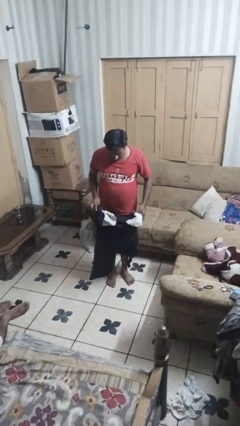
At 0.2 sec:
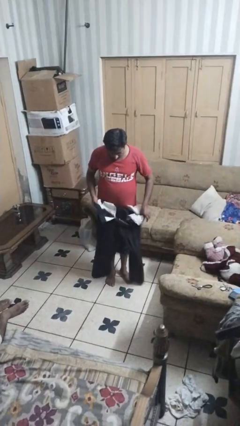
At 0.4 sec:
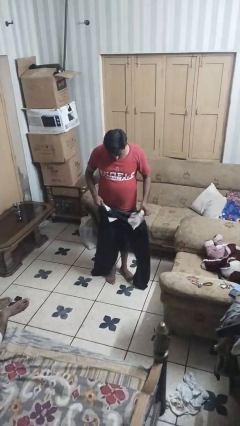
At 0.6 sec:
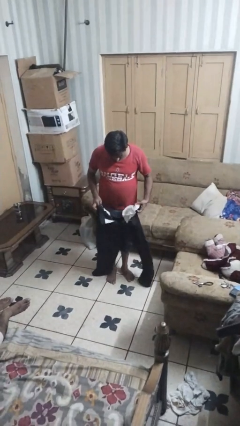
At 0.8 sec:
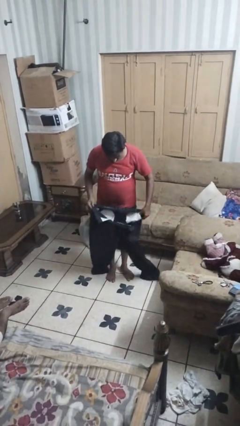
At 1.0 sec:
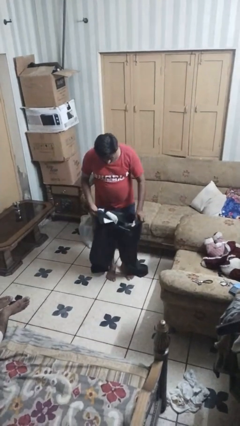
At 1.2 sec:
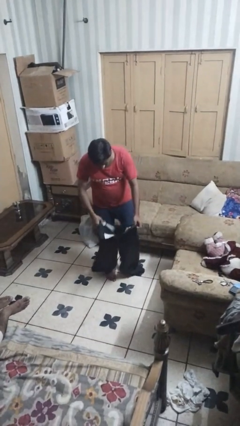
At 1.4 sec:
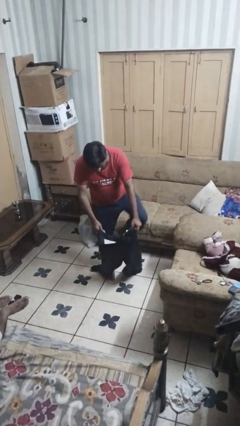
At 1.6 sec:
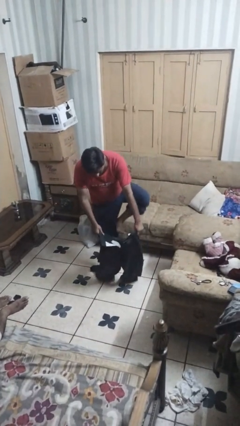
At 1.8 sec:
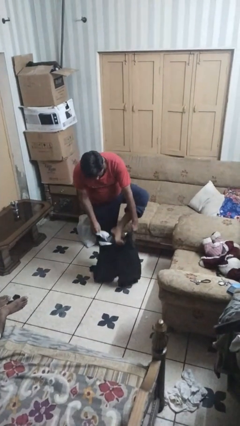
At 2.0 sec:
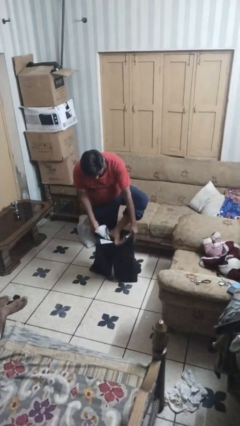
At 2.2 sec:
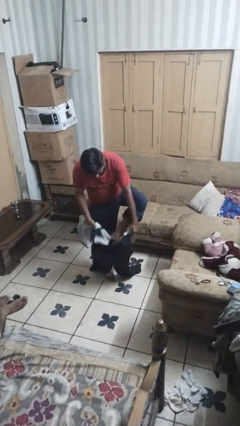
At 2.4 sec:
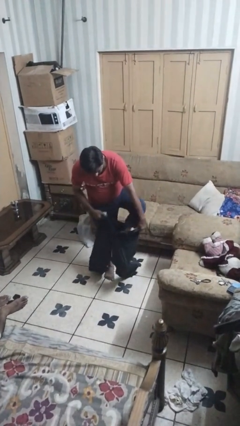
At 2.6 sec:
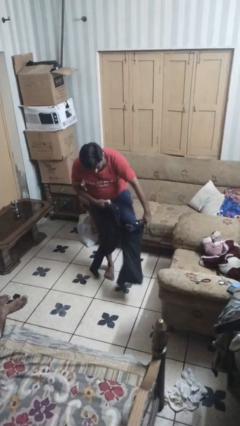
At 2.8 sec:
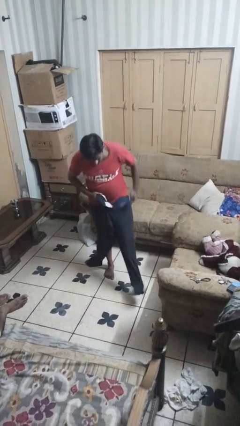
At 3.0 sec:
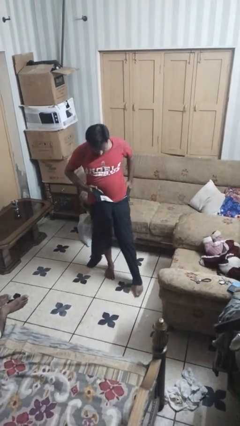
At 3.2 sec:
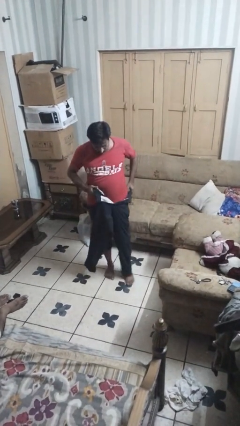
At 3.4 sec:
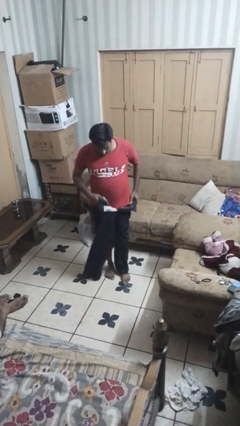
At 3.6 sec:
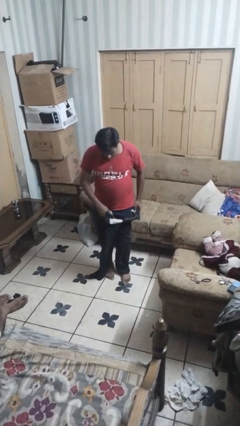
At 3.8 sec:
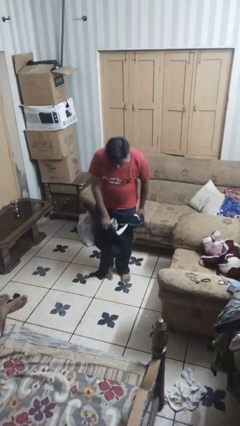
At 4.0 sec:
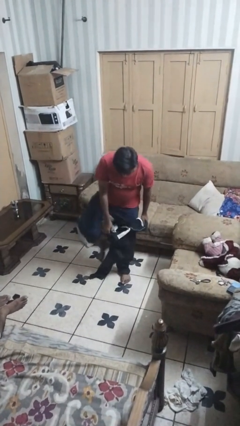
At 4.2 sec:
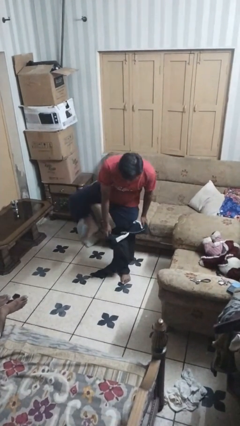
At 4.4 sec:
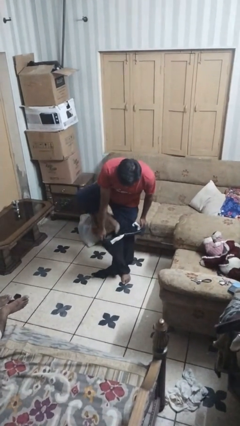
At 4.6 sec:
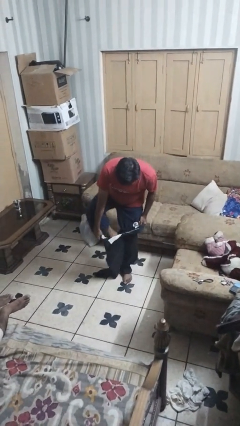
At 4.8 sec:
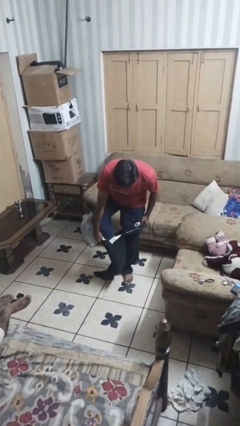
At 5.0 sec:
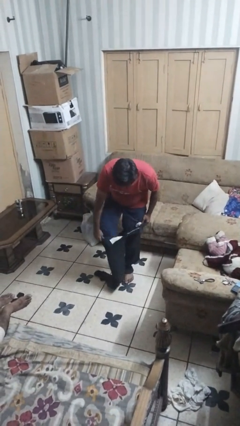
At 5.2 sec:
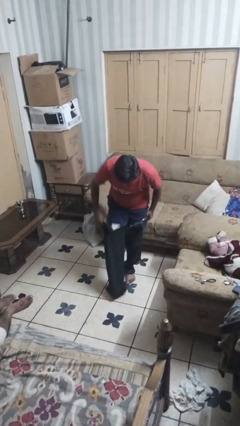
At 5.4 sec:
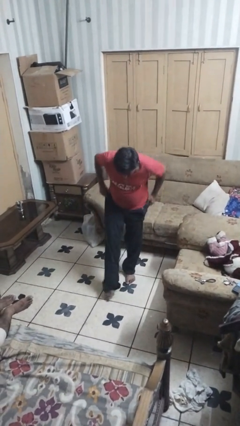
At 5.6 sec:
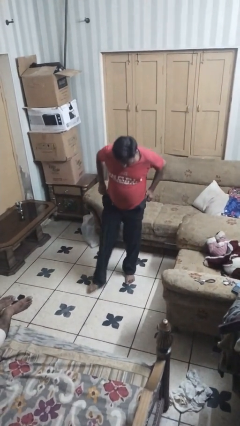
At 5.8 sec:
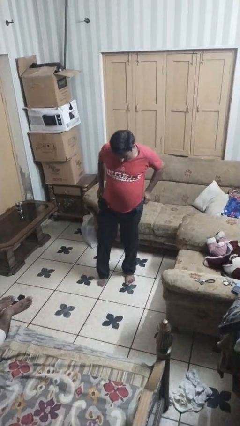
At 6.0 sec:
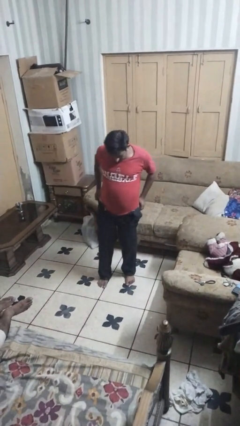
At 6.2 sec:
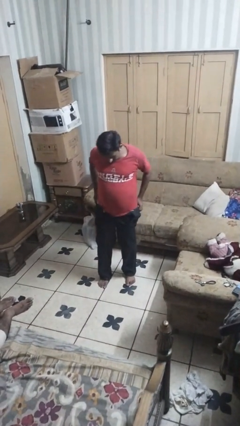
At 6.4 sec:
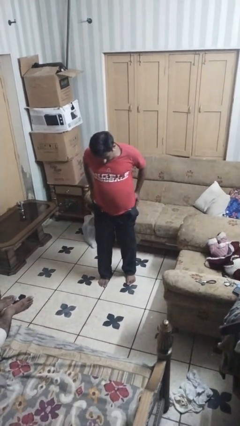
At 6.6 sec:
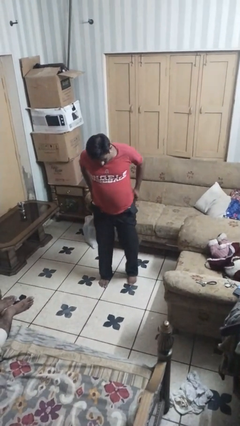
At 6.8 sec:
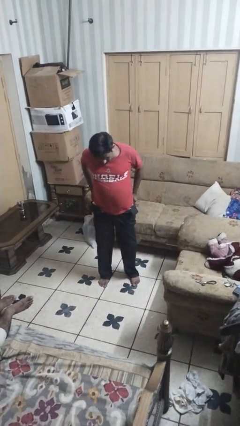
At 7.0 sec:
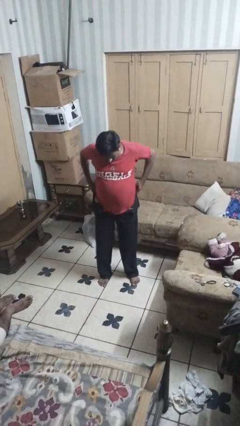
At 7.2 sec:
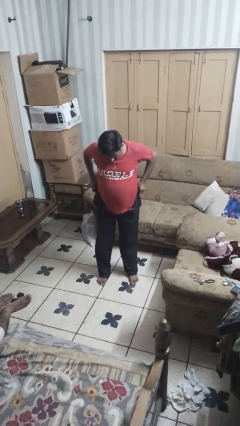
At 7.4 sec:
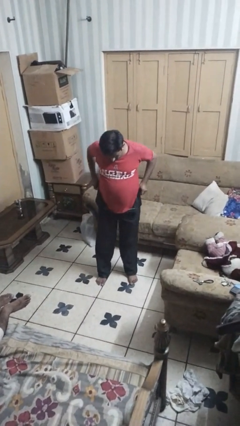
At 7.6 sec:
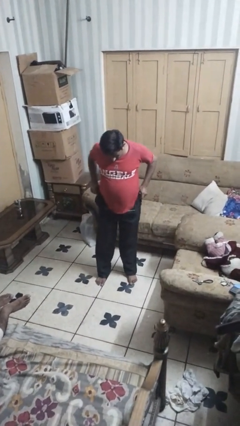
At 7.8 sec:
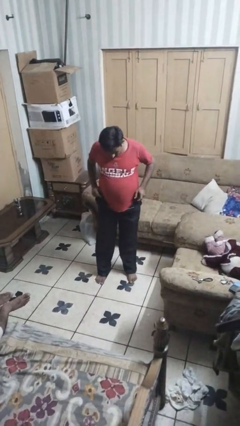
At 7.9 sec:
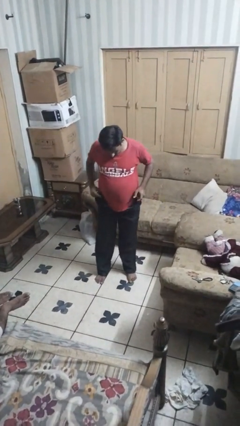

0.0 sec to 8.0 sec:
person puts on pants

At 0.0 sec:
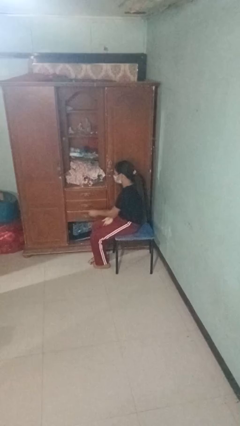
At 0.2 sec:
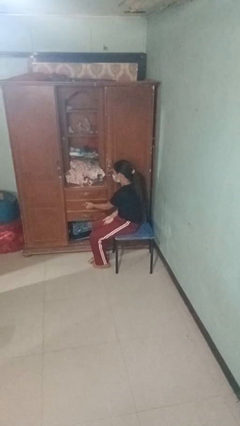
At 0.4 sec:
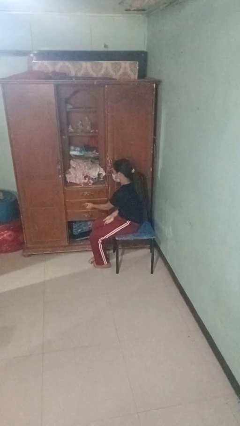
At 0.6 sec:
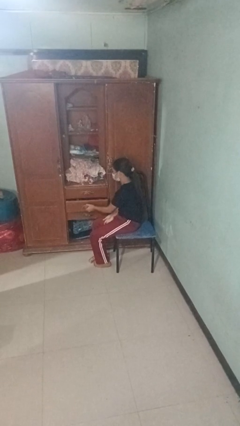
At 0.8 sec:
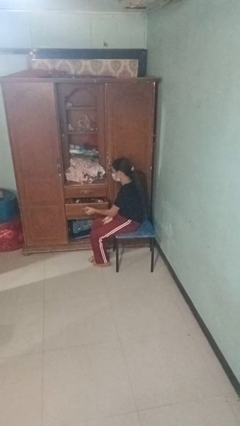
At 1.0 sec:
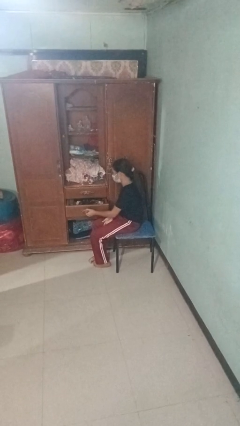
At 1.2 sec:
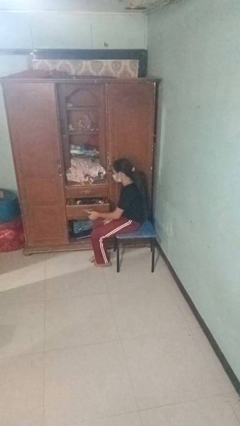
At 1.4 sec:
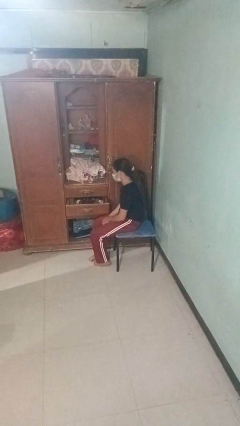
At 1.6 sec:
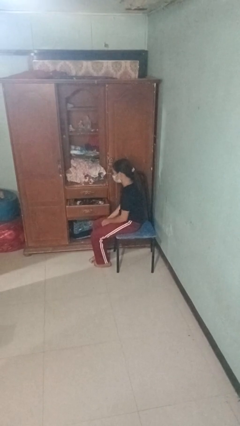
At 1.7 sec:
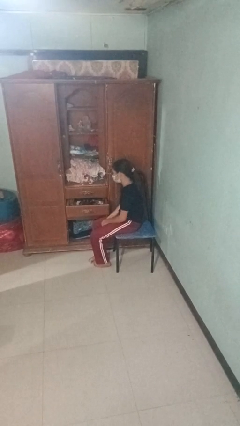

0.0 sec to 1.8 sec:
person opens dresser drawer

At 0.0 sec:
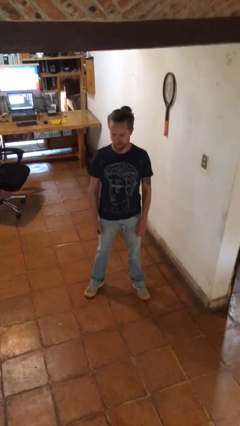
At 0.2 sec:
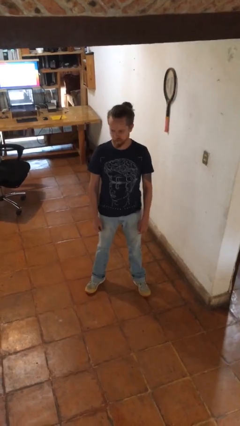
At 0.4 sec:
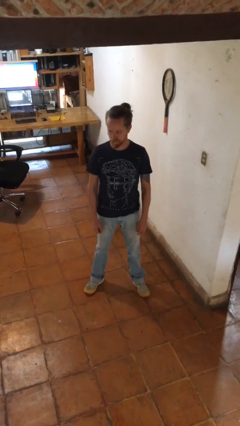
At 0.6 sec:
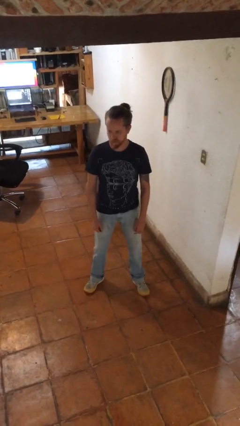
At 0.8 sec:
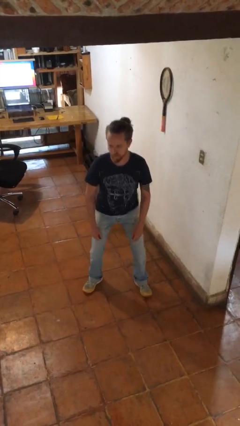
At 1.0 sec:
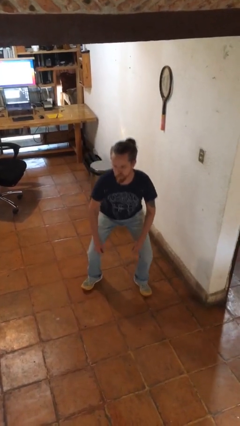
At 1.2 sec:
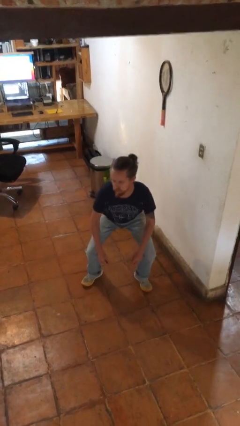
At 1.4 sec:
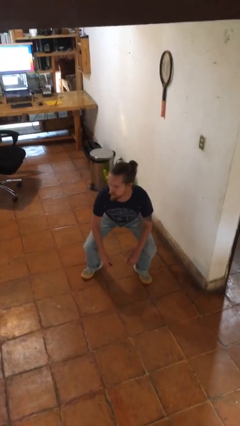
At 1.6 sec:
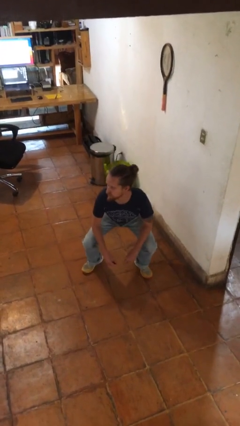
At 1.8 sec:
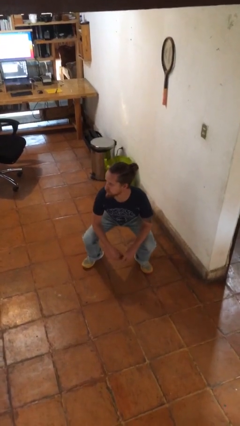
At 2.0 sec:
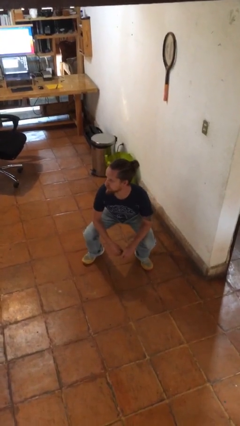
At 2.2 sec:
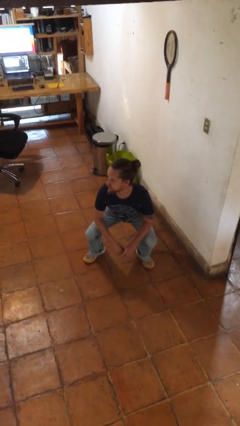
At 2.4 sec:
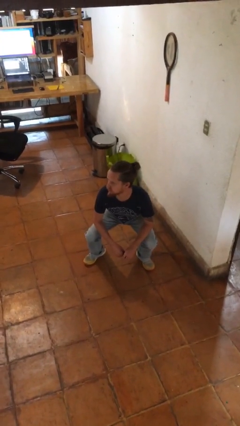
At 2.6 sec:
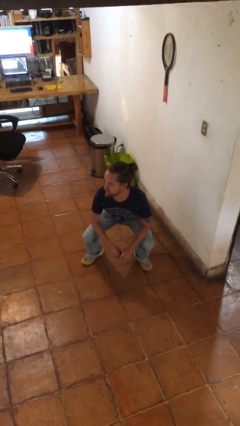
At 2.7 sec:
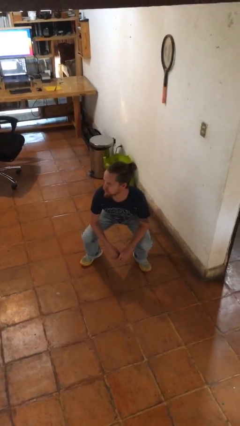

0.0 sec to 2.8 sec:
person squats

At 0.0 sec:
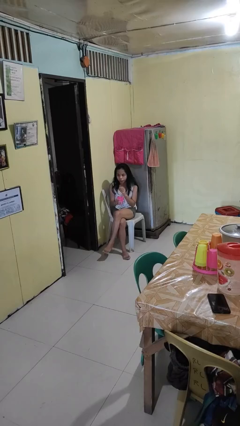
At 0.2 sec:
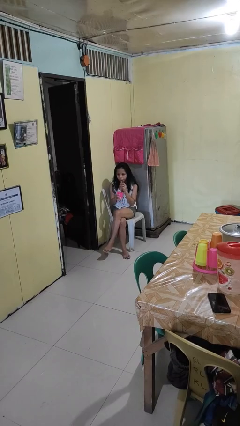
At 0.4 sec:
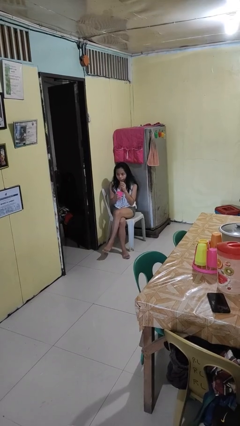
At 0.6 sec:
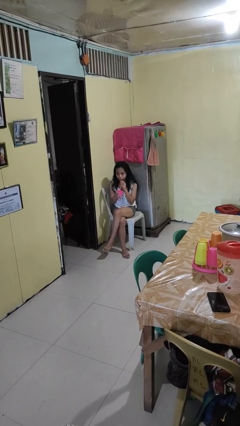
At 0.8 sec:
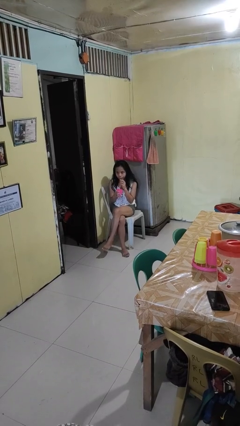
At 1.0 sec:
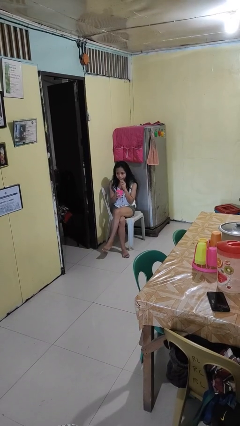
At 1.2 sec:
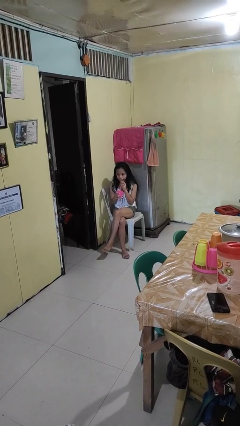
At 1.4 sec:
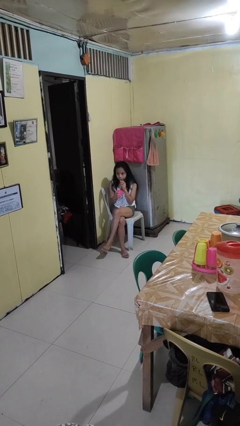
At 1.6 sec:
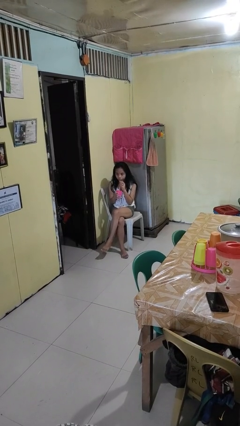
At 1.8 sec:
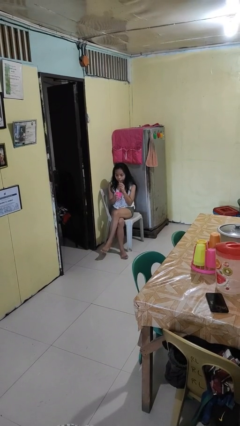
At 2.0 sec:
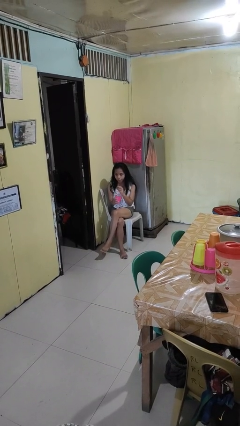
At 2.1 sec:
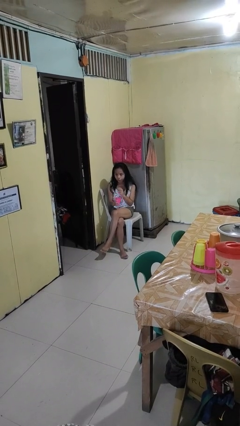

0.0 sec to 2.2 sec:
person drinks from straw

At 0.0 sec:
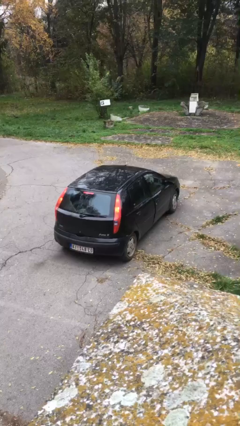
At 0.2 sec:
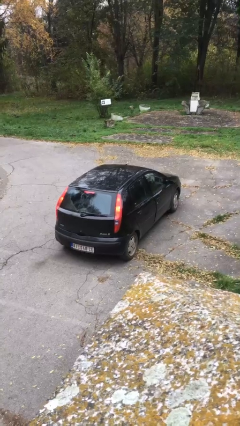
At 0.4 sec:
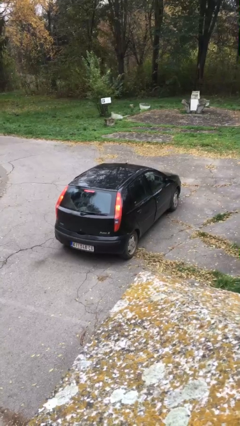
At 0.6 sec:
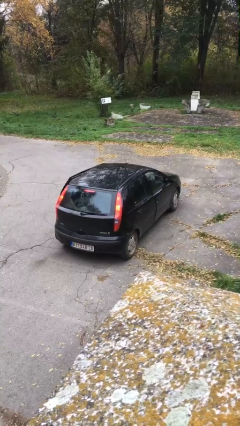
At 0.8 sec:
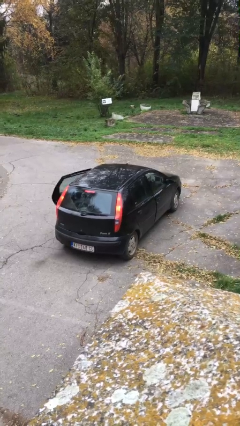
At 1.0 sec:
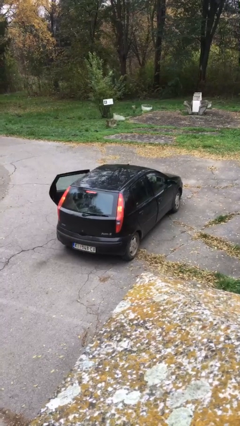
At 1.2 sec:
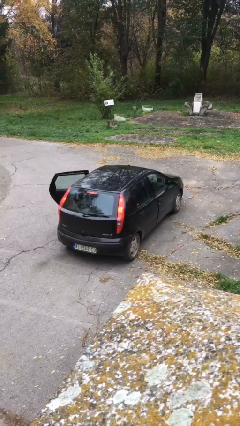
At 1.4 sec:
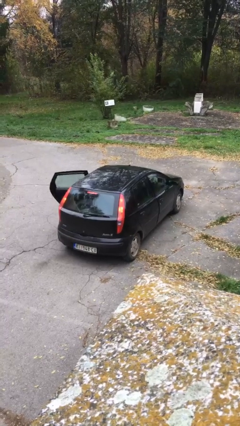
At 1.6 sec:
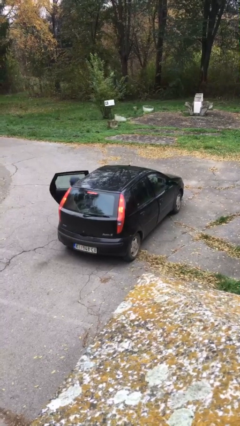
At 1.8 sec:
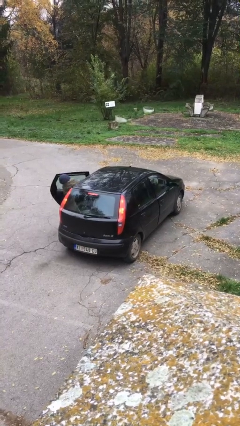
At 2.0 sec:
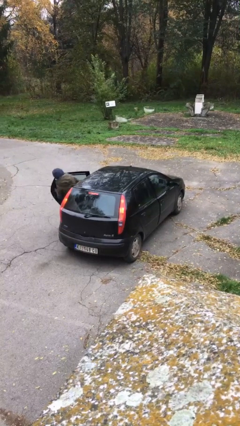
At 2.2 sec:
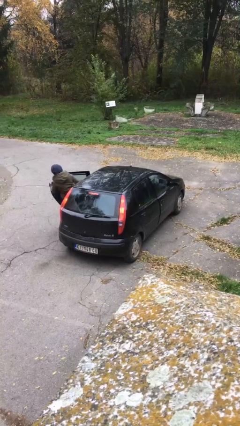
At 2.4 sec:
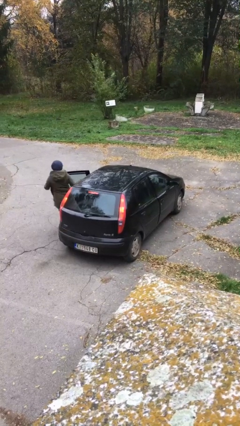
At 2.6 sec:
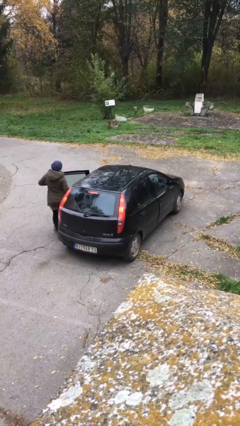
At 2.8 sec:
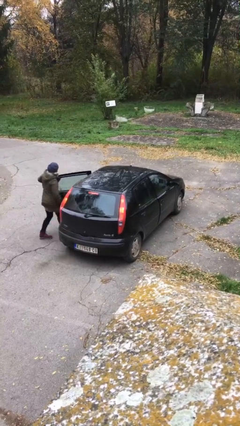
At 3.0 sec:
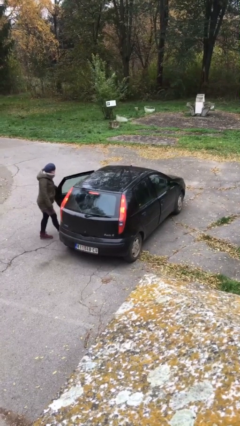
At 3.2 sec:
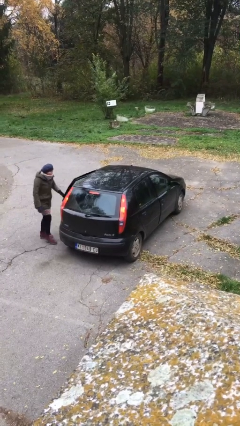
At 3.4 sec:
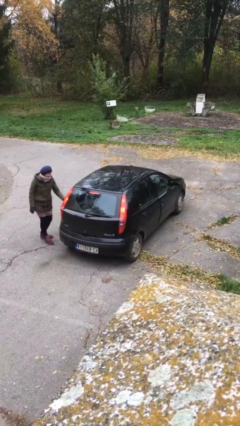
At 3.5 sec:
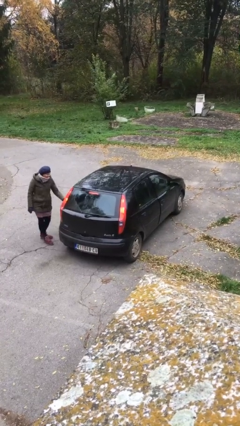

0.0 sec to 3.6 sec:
car drops off person
